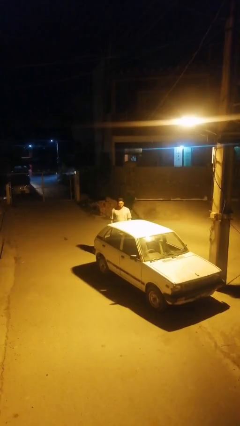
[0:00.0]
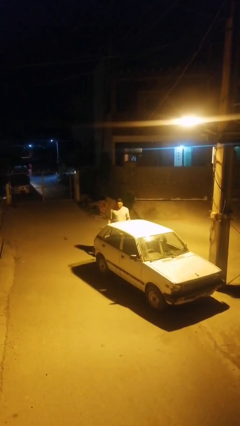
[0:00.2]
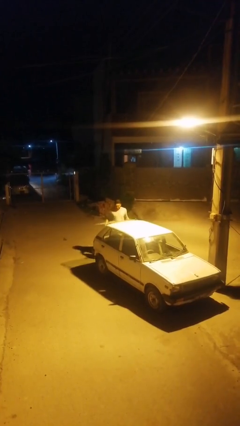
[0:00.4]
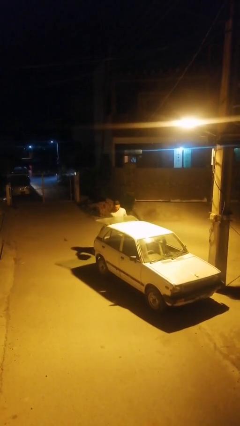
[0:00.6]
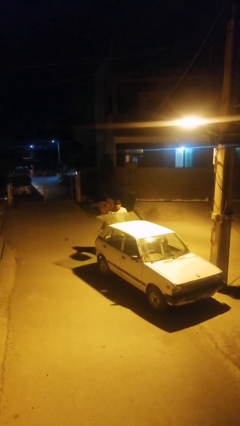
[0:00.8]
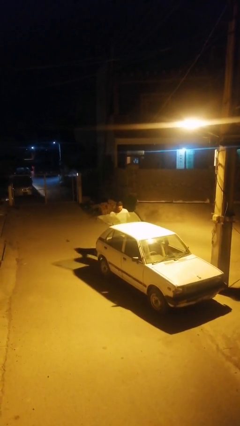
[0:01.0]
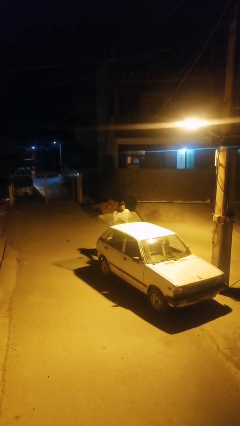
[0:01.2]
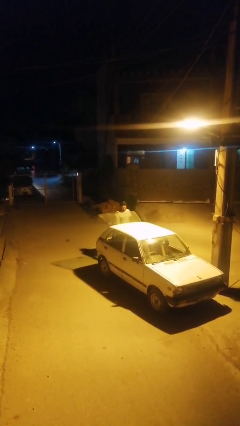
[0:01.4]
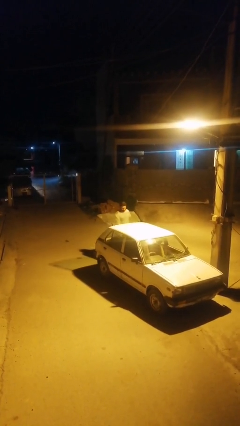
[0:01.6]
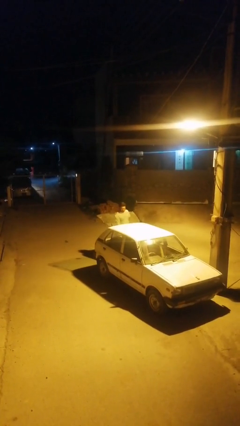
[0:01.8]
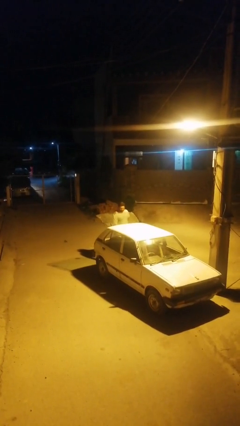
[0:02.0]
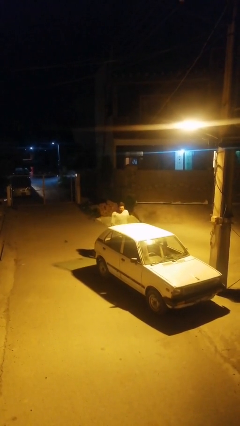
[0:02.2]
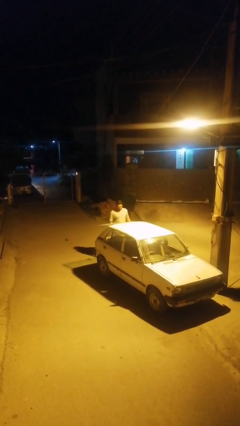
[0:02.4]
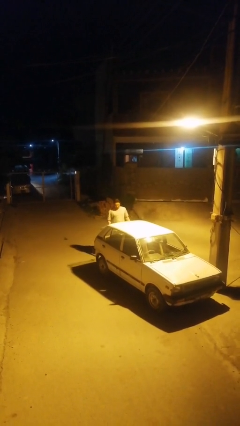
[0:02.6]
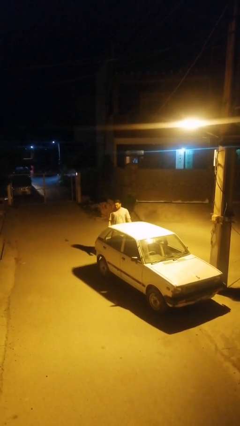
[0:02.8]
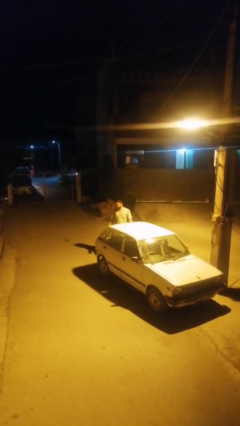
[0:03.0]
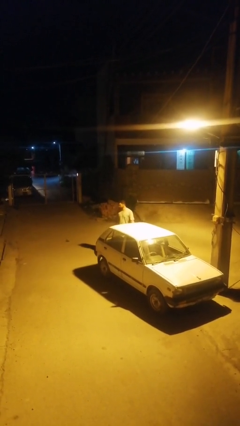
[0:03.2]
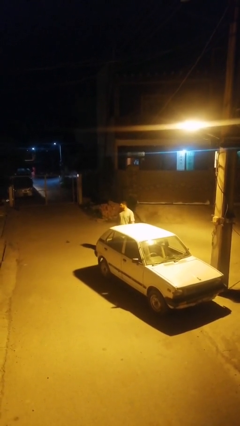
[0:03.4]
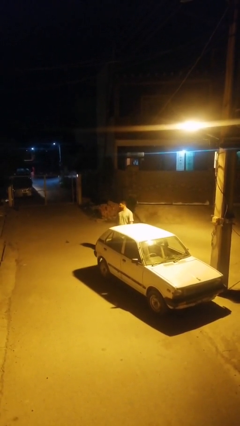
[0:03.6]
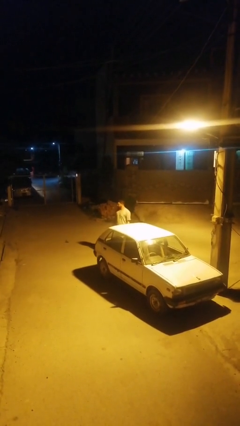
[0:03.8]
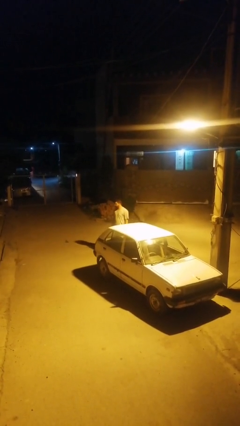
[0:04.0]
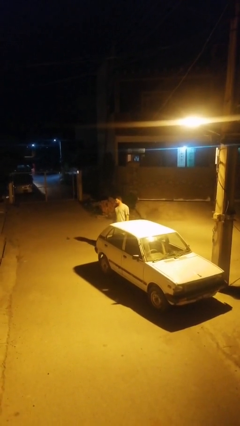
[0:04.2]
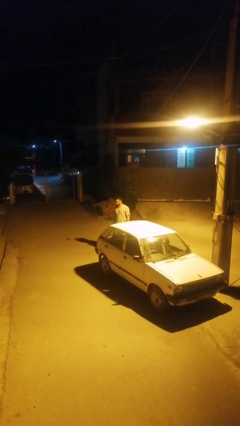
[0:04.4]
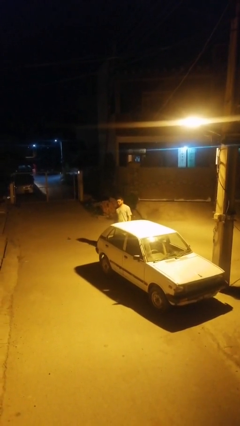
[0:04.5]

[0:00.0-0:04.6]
person loads car

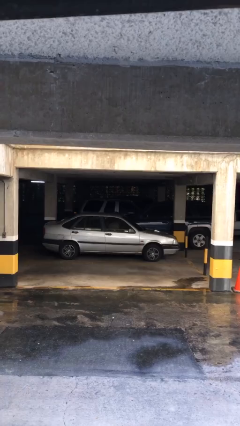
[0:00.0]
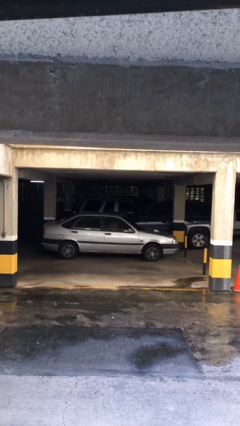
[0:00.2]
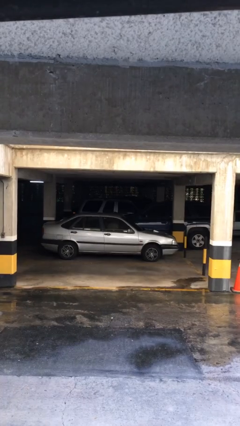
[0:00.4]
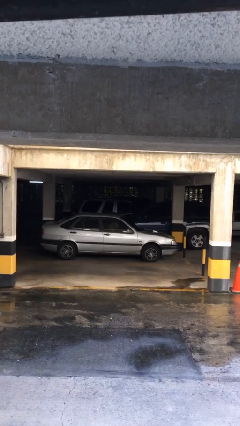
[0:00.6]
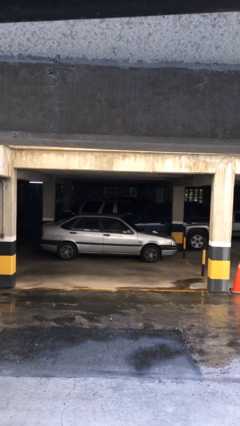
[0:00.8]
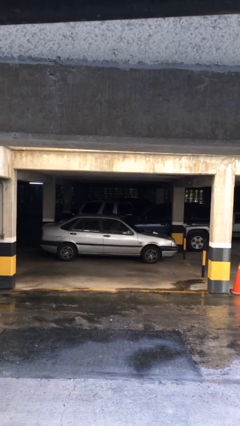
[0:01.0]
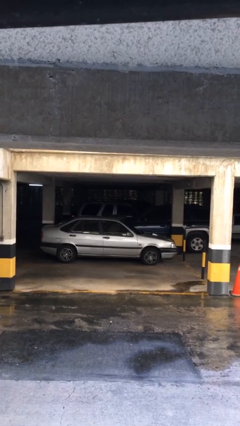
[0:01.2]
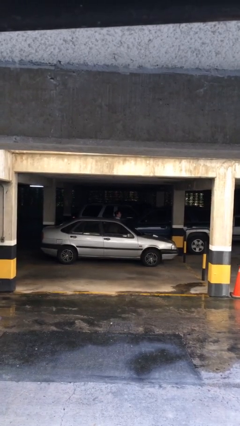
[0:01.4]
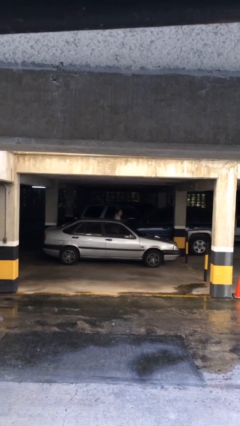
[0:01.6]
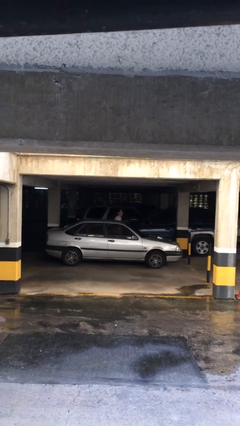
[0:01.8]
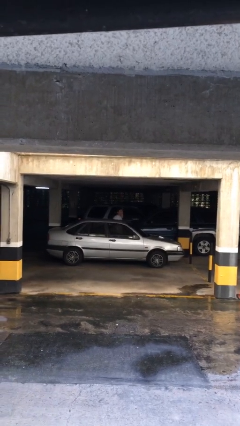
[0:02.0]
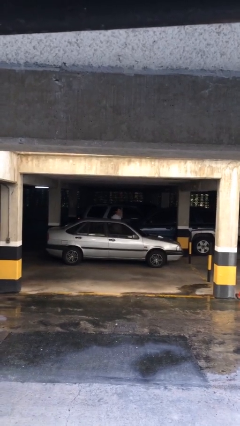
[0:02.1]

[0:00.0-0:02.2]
person exits car

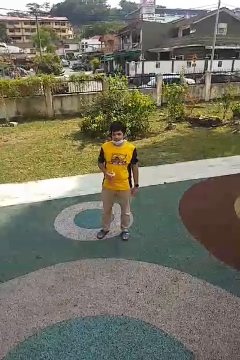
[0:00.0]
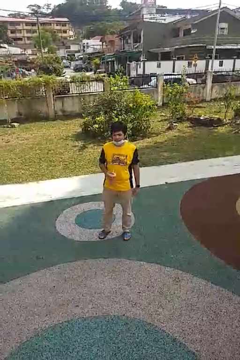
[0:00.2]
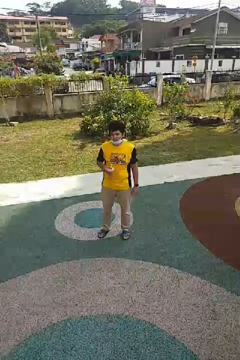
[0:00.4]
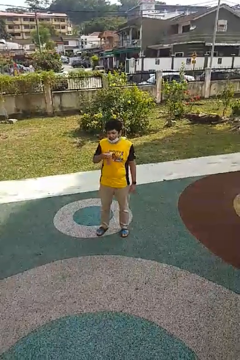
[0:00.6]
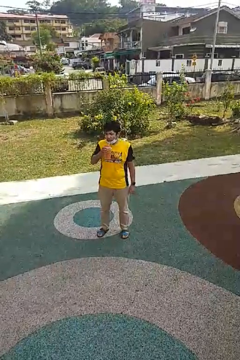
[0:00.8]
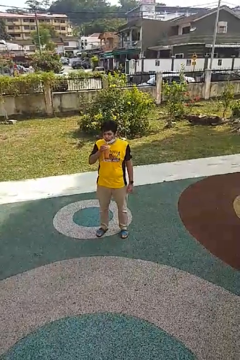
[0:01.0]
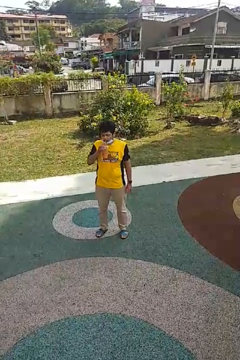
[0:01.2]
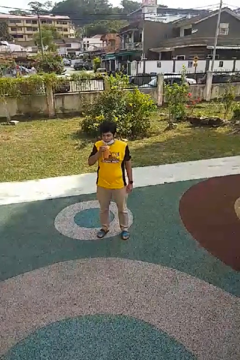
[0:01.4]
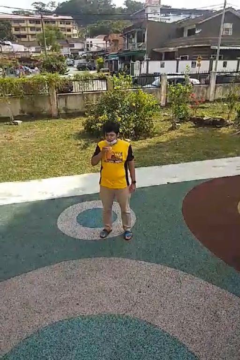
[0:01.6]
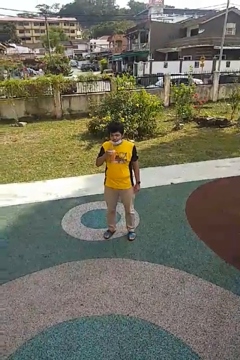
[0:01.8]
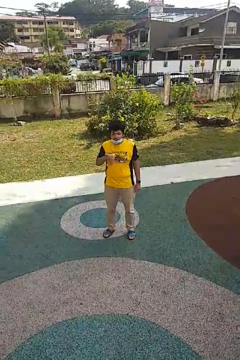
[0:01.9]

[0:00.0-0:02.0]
person drinks from straw

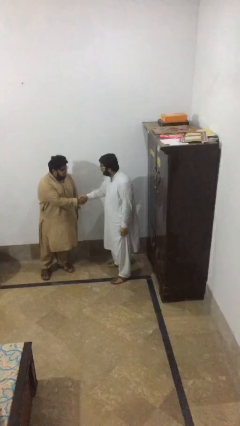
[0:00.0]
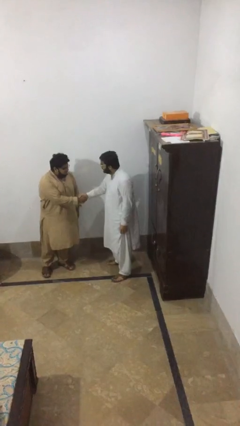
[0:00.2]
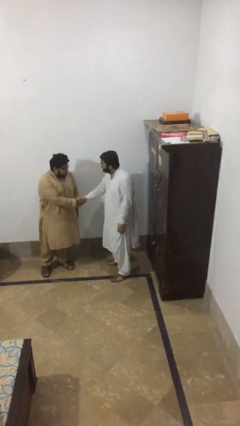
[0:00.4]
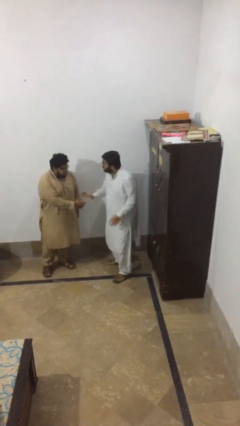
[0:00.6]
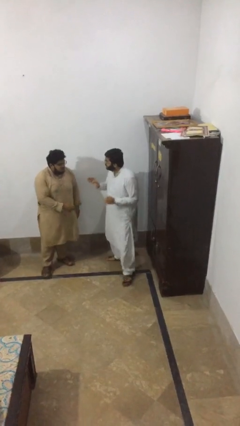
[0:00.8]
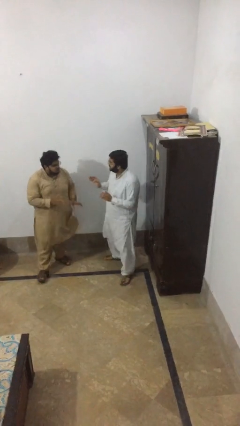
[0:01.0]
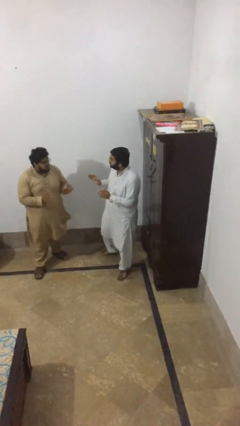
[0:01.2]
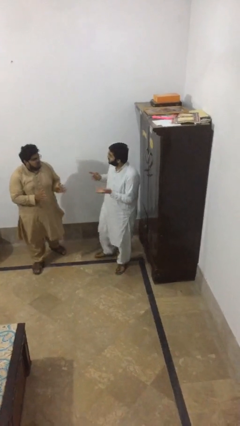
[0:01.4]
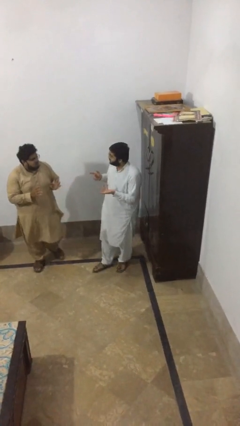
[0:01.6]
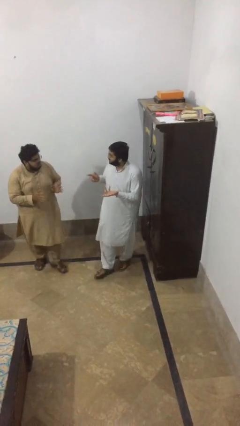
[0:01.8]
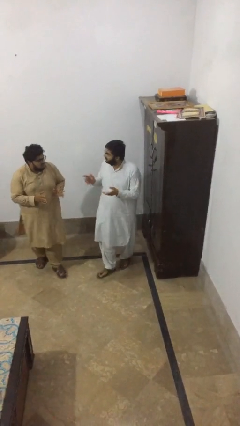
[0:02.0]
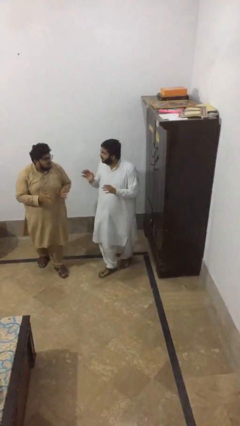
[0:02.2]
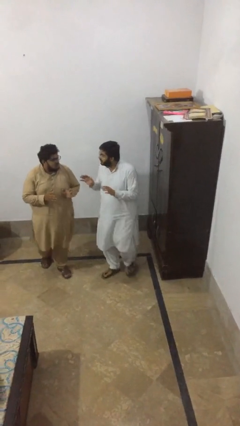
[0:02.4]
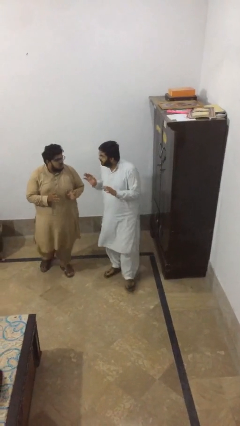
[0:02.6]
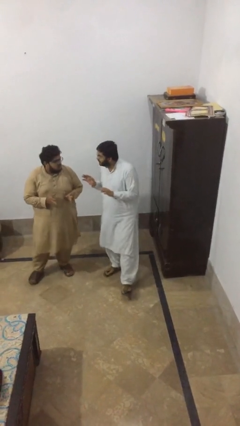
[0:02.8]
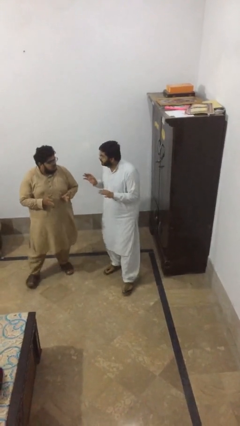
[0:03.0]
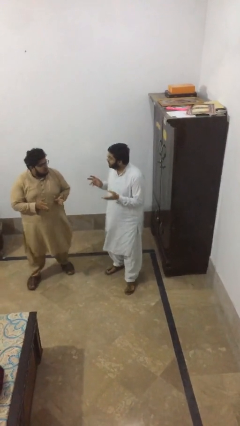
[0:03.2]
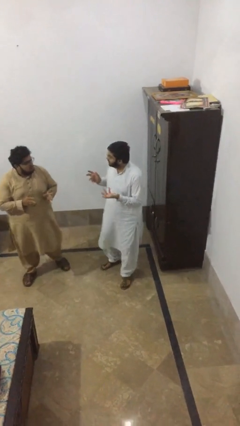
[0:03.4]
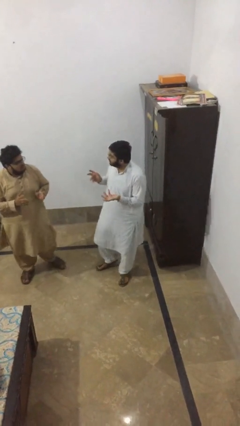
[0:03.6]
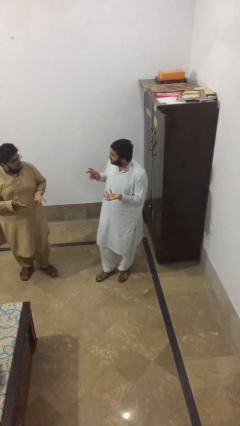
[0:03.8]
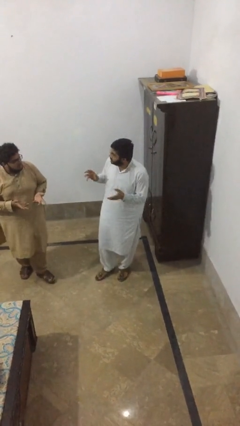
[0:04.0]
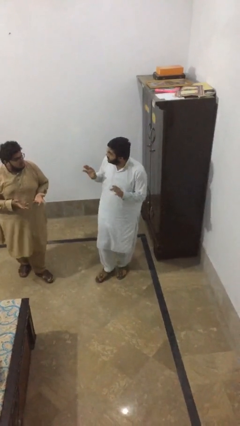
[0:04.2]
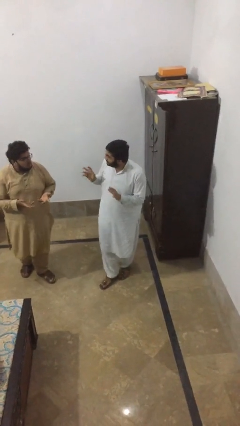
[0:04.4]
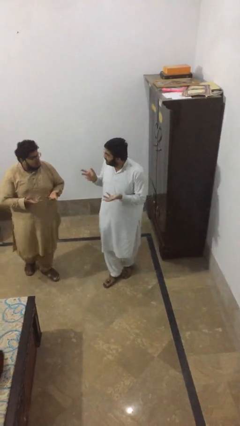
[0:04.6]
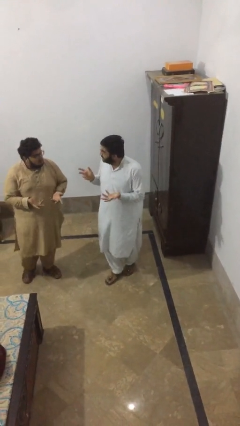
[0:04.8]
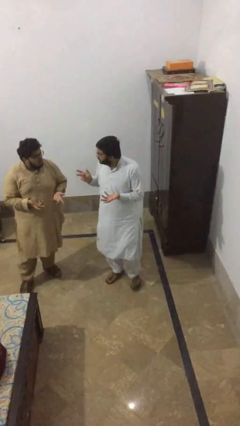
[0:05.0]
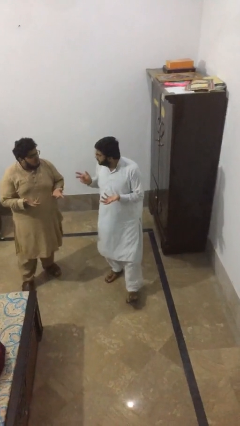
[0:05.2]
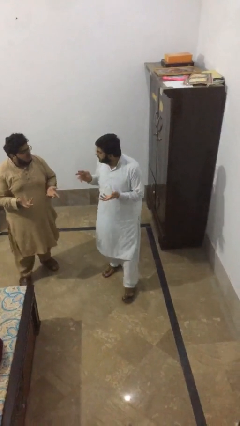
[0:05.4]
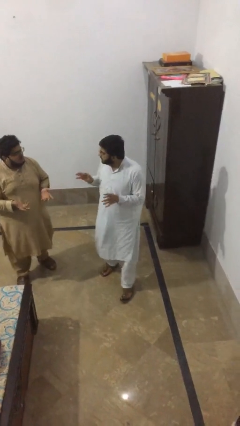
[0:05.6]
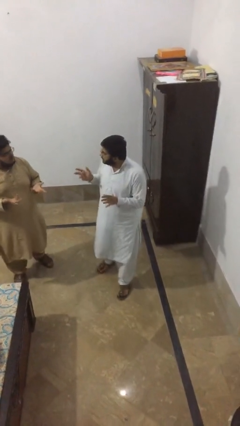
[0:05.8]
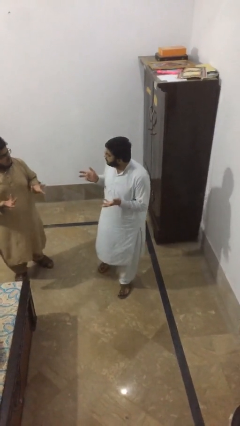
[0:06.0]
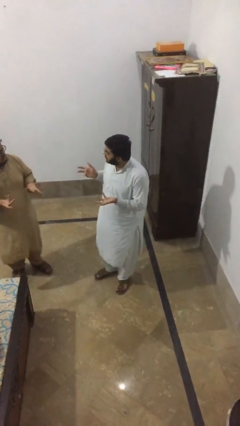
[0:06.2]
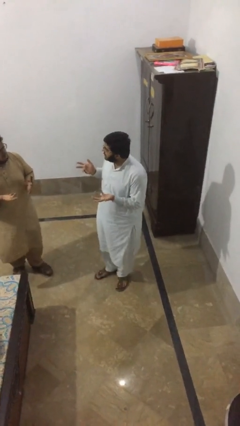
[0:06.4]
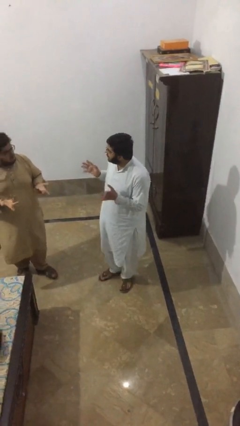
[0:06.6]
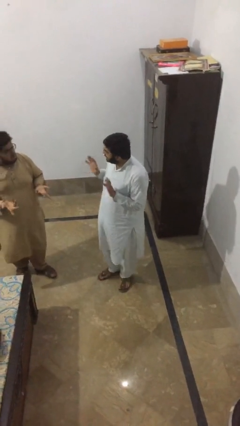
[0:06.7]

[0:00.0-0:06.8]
person talks to person

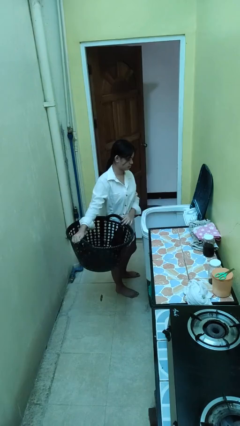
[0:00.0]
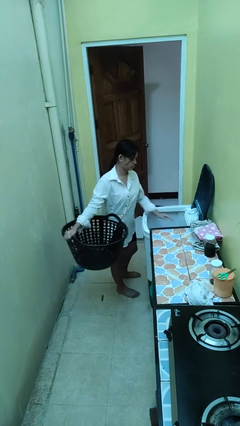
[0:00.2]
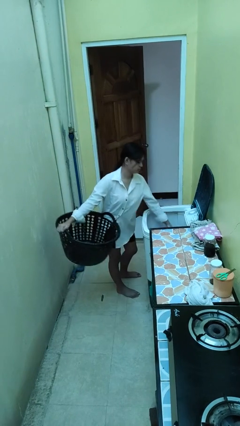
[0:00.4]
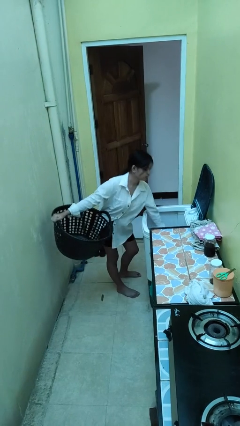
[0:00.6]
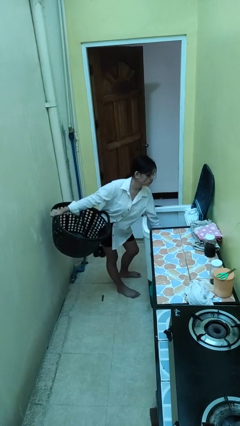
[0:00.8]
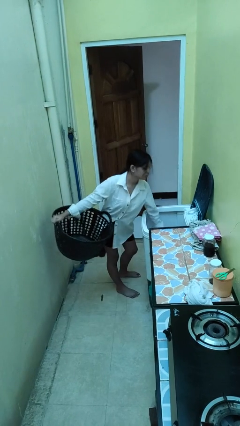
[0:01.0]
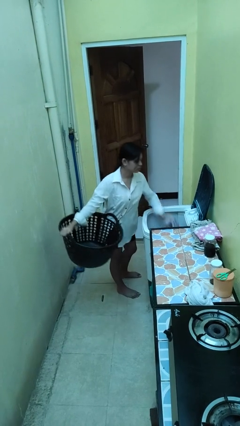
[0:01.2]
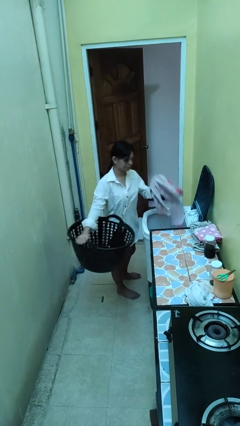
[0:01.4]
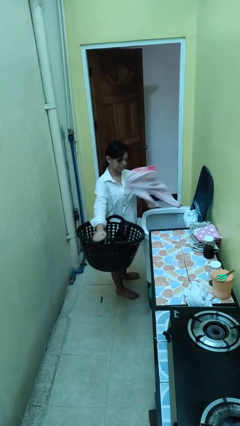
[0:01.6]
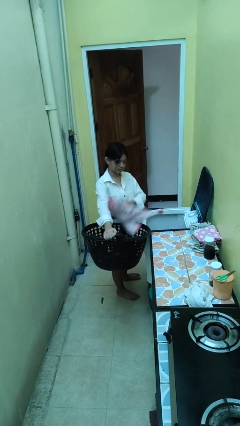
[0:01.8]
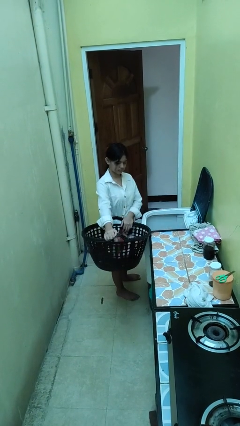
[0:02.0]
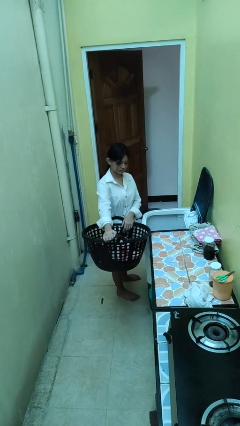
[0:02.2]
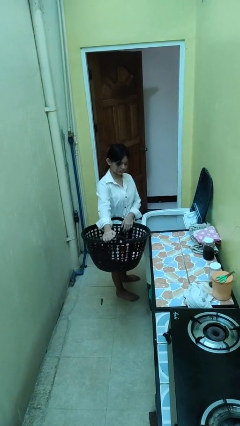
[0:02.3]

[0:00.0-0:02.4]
person loads clotheswasher
